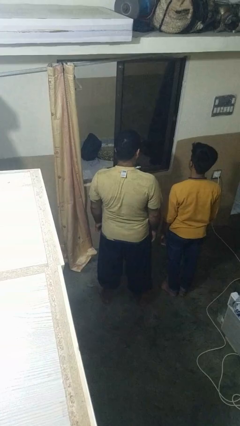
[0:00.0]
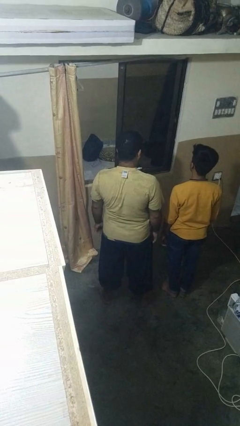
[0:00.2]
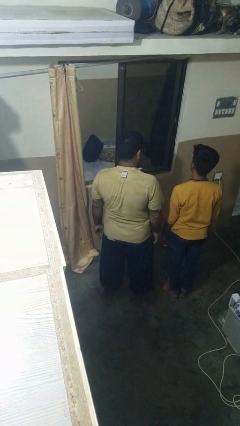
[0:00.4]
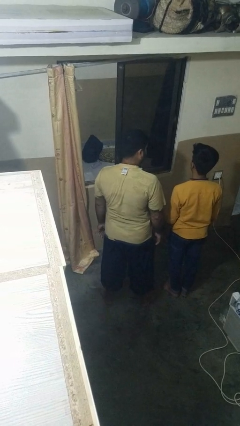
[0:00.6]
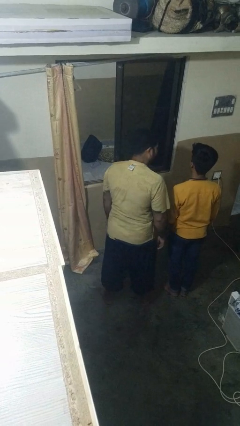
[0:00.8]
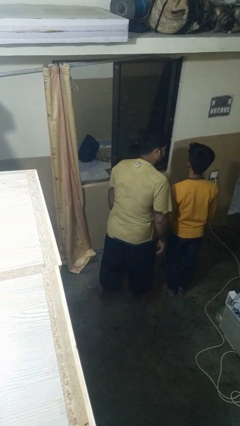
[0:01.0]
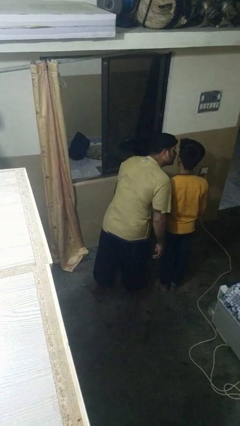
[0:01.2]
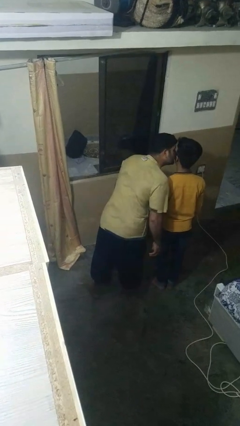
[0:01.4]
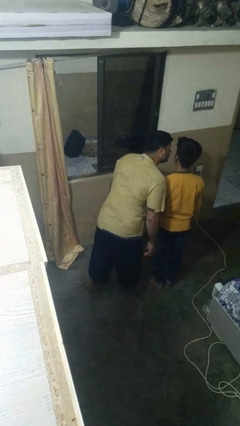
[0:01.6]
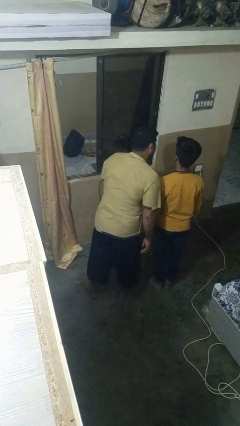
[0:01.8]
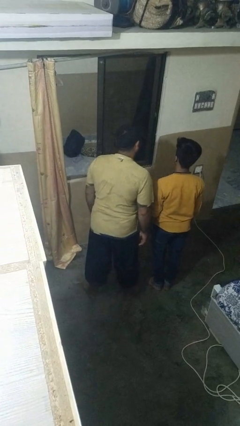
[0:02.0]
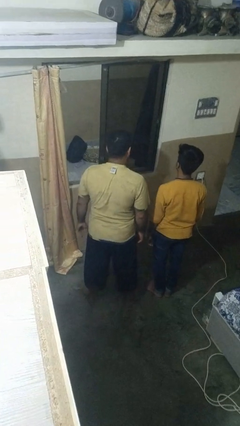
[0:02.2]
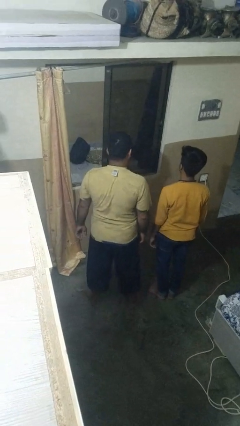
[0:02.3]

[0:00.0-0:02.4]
person kisses cheek of person

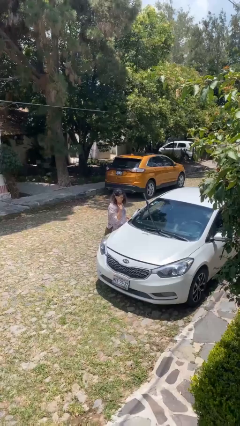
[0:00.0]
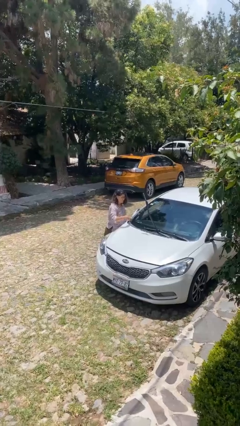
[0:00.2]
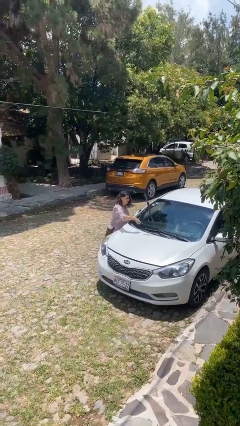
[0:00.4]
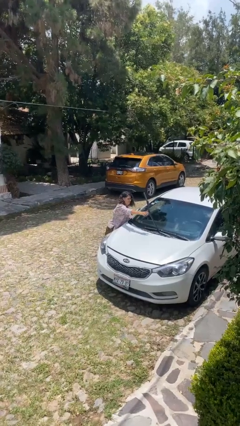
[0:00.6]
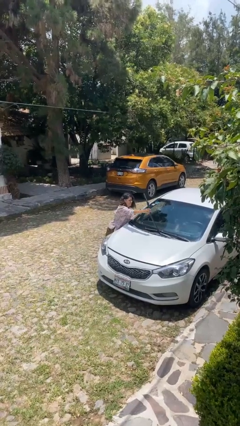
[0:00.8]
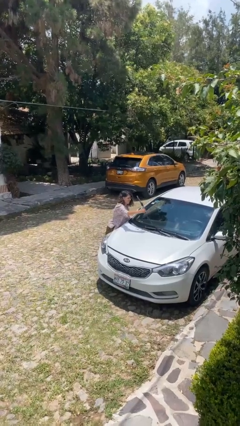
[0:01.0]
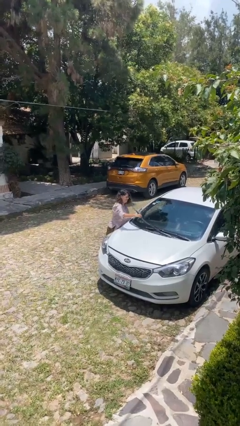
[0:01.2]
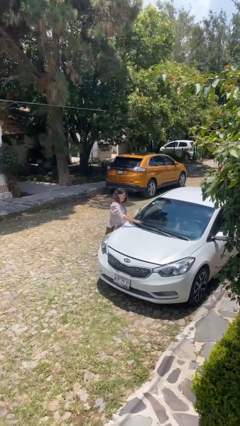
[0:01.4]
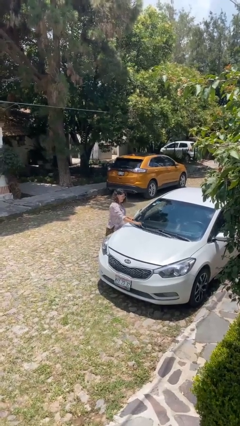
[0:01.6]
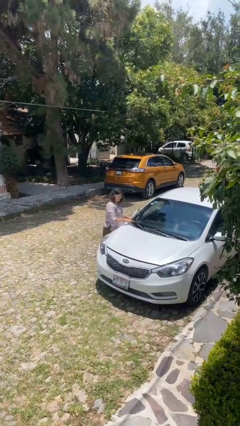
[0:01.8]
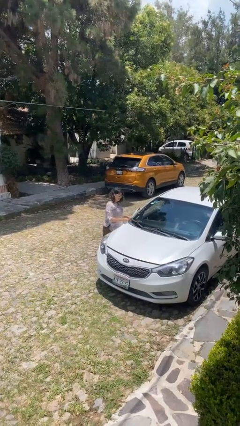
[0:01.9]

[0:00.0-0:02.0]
person flips down car wipers

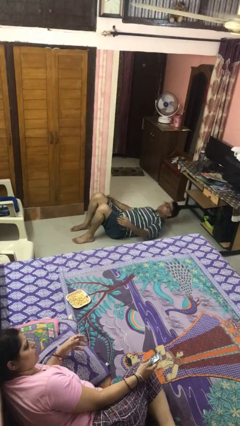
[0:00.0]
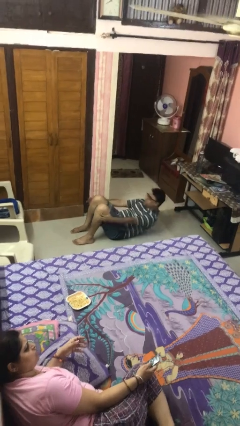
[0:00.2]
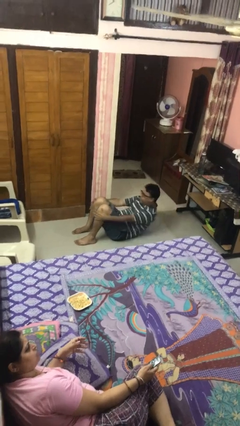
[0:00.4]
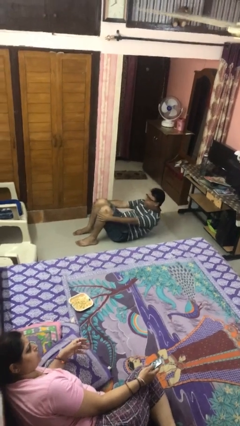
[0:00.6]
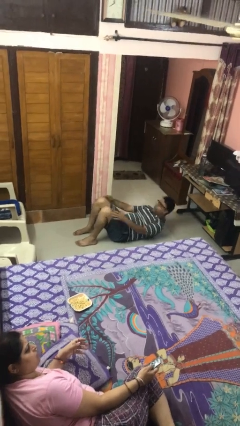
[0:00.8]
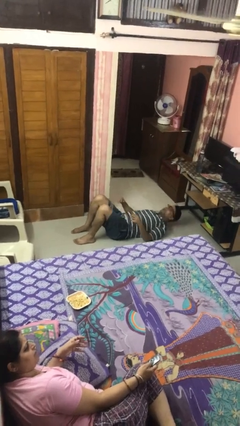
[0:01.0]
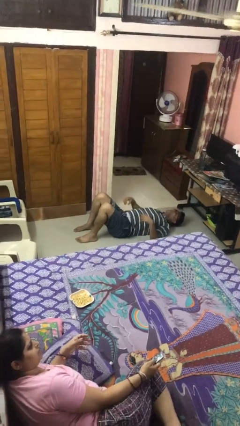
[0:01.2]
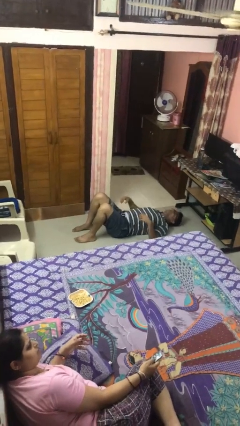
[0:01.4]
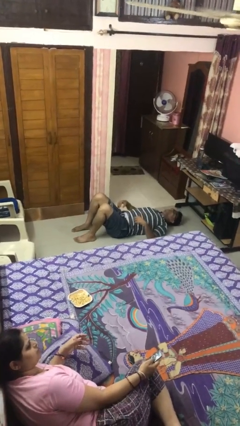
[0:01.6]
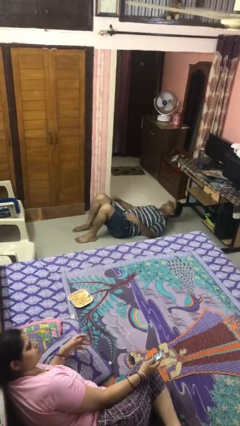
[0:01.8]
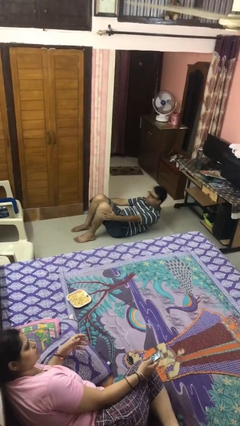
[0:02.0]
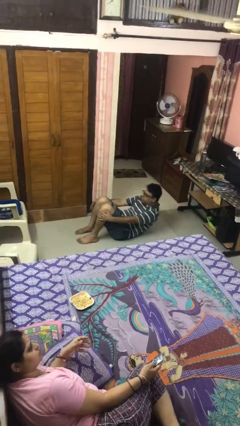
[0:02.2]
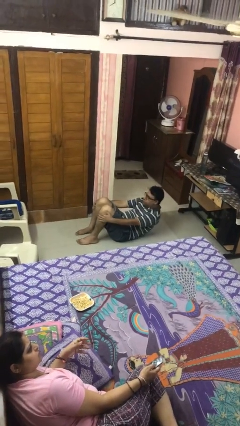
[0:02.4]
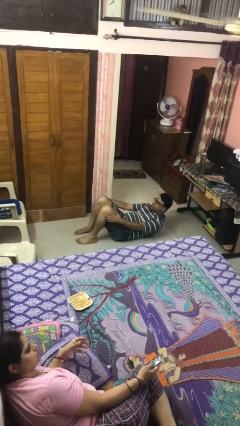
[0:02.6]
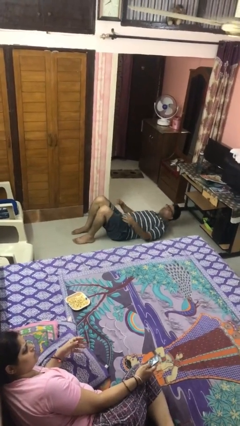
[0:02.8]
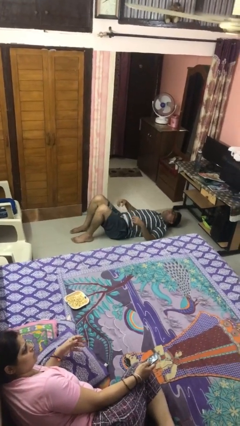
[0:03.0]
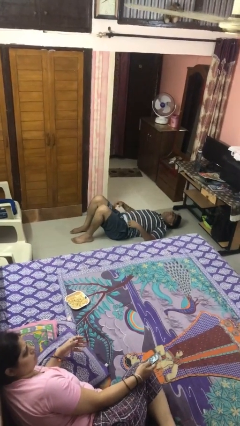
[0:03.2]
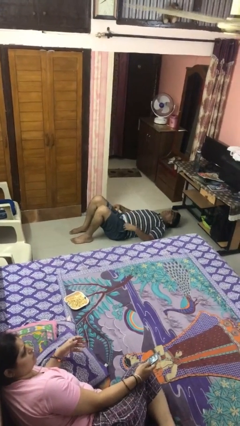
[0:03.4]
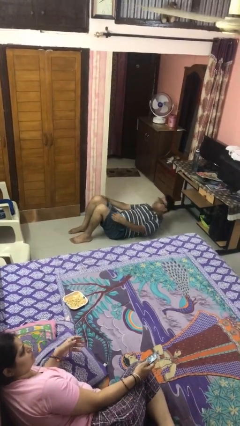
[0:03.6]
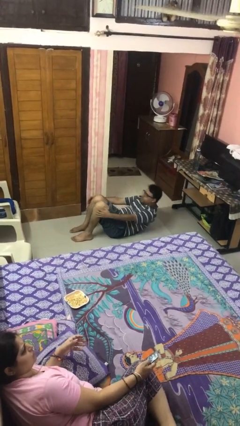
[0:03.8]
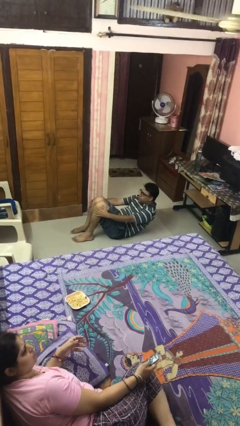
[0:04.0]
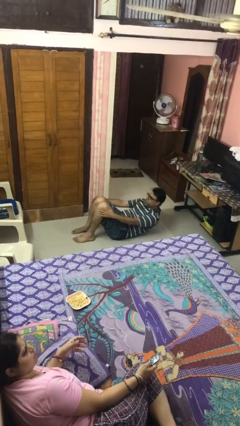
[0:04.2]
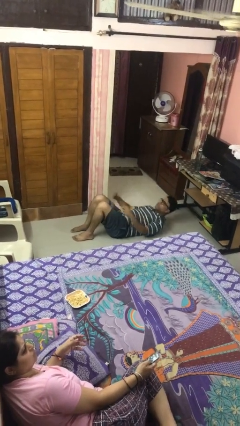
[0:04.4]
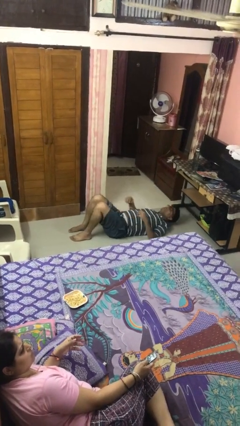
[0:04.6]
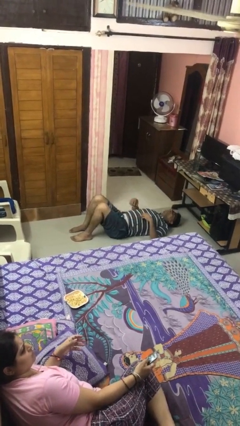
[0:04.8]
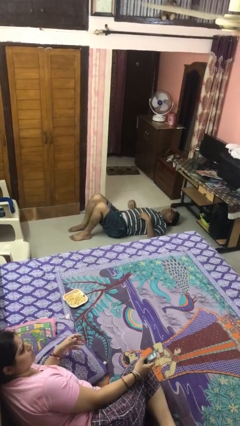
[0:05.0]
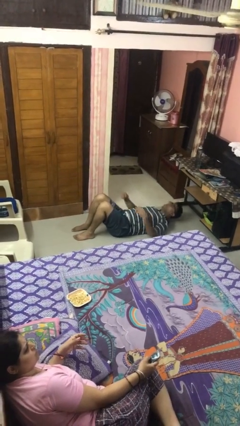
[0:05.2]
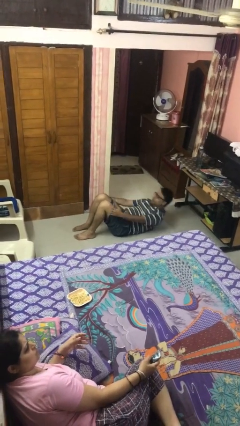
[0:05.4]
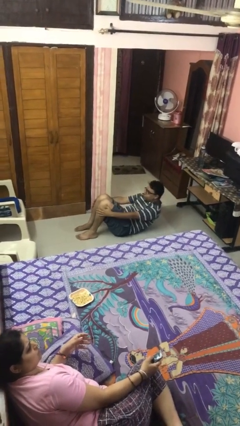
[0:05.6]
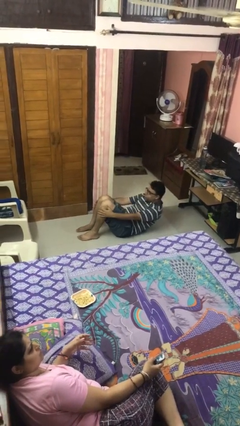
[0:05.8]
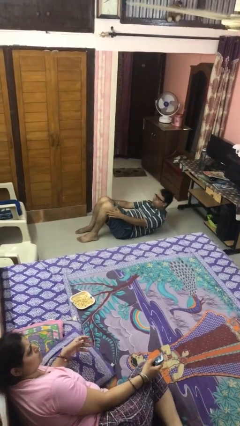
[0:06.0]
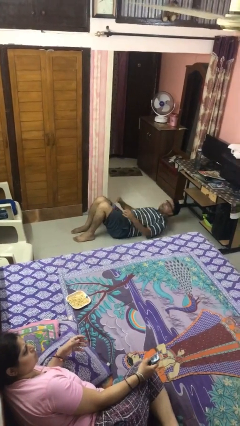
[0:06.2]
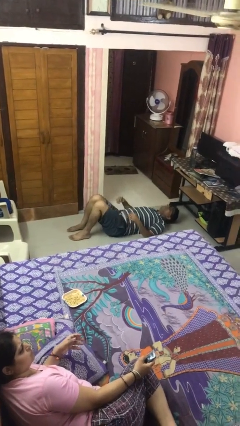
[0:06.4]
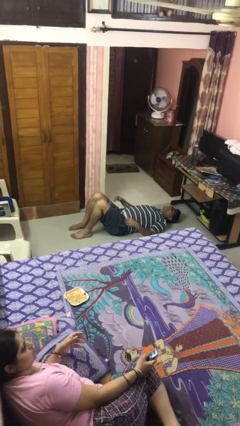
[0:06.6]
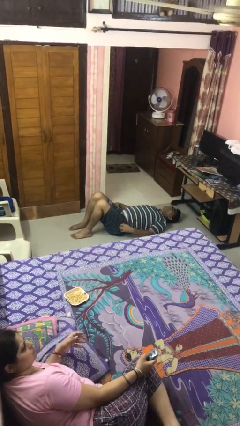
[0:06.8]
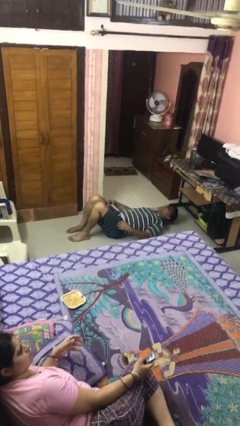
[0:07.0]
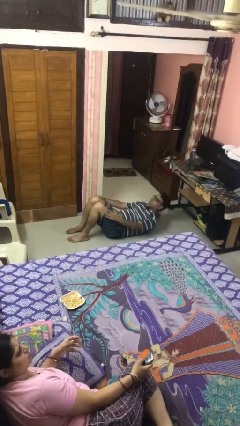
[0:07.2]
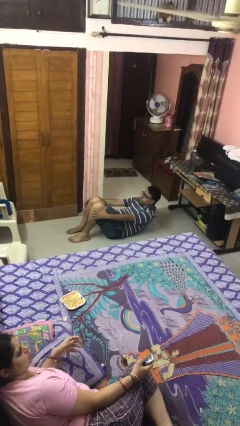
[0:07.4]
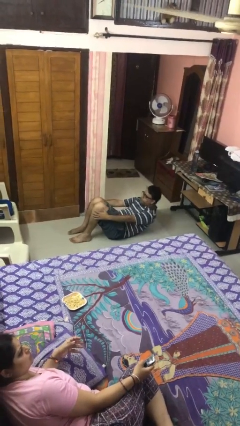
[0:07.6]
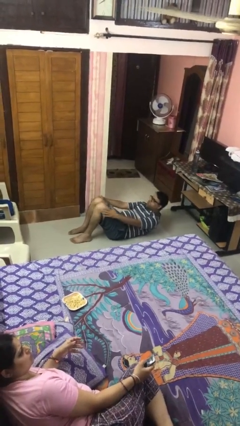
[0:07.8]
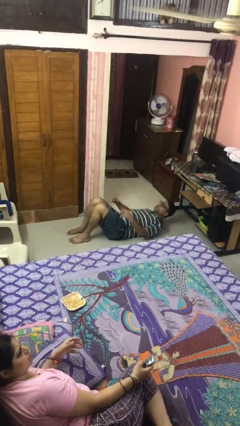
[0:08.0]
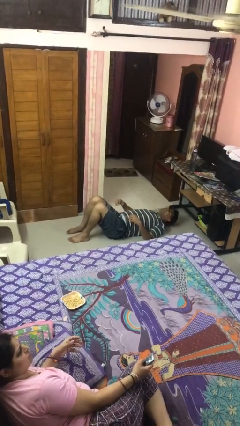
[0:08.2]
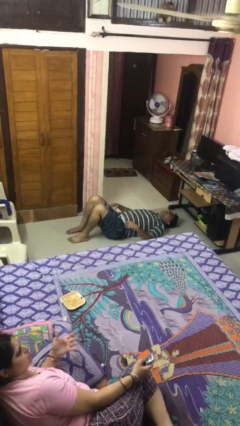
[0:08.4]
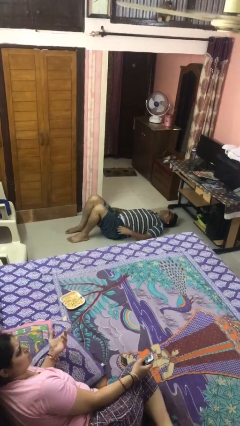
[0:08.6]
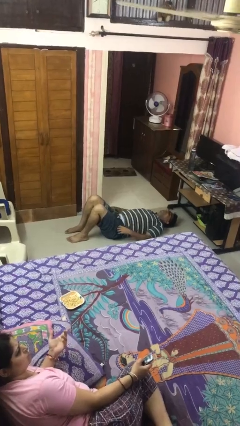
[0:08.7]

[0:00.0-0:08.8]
person exercises with situp

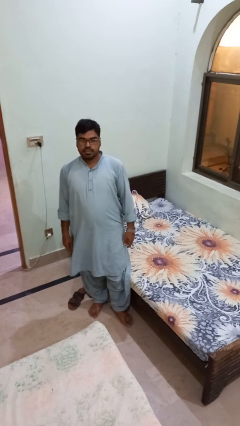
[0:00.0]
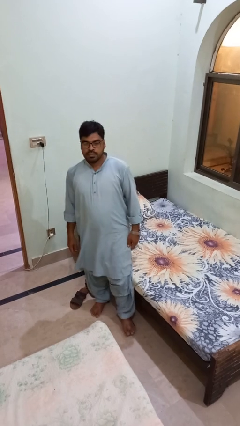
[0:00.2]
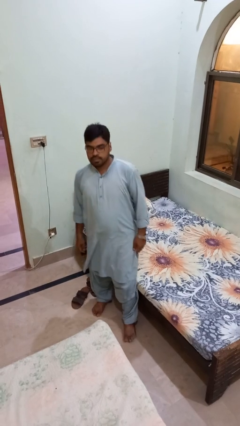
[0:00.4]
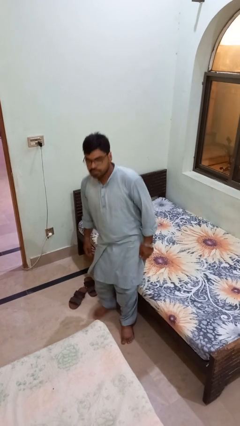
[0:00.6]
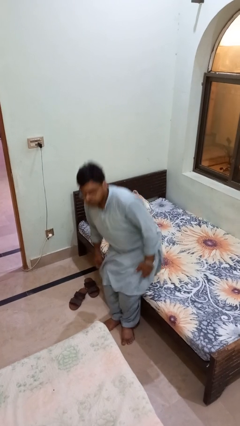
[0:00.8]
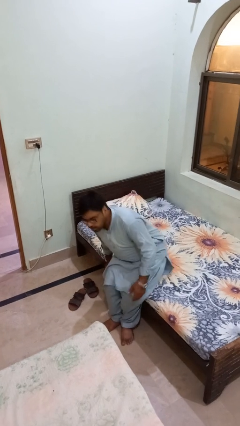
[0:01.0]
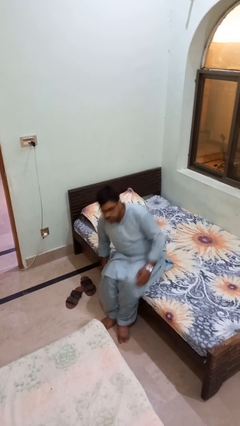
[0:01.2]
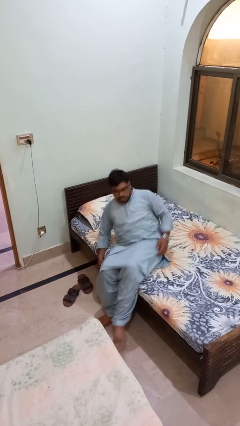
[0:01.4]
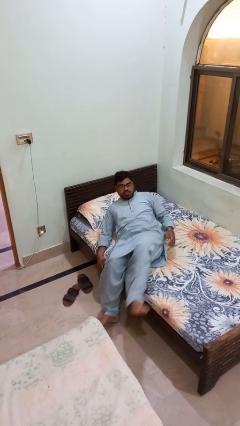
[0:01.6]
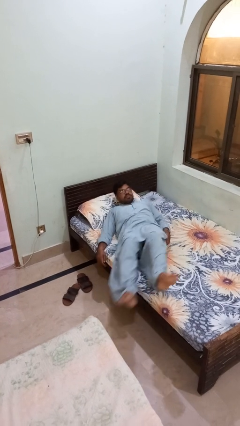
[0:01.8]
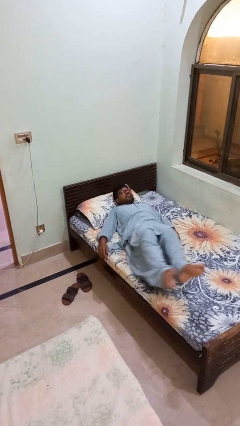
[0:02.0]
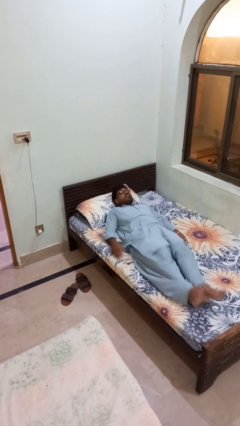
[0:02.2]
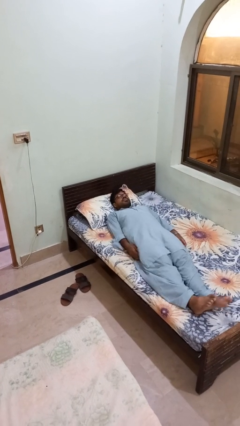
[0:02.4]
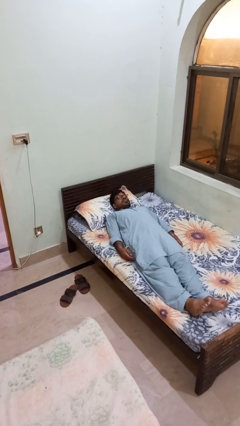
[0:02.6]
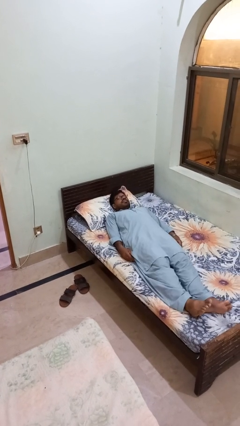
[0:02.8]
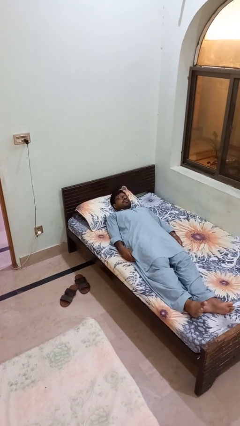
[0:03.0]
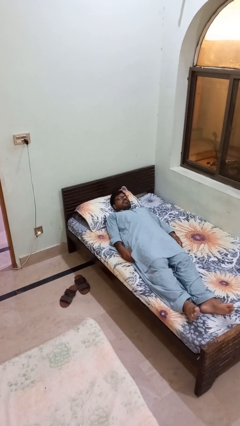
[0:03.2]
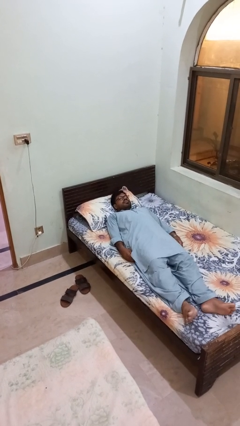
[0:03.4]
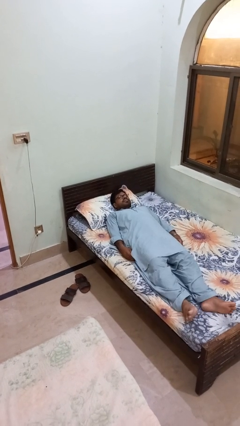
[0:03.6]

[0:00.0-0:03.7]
person lies down on bed

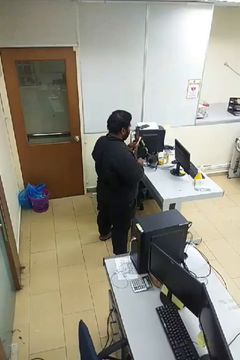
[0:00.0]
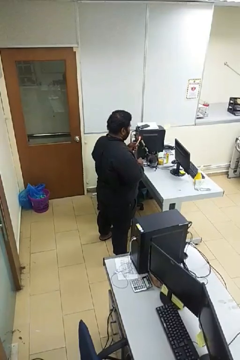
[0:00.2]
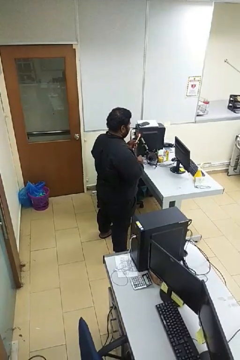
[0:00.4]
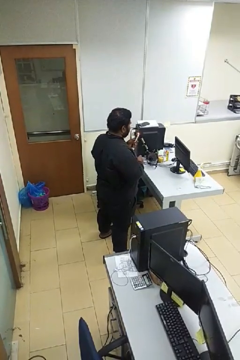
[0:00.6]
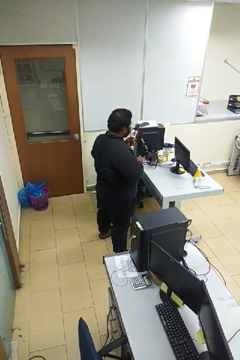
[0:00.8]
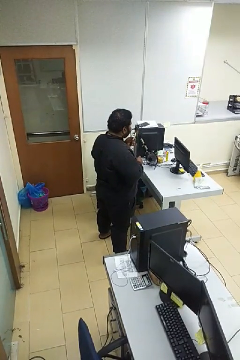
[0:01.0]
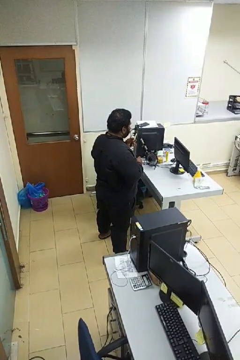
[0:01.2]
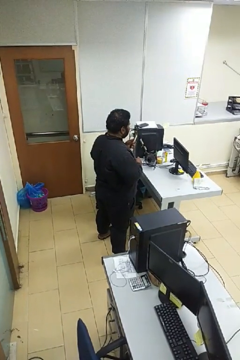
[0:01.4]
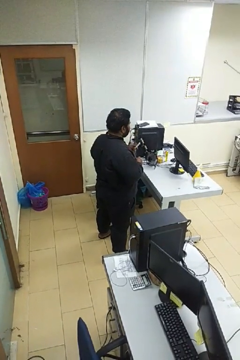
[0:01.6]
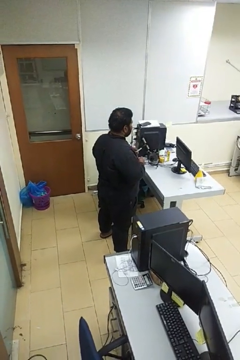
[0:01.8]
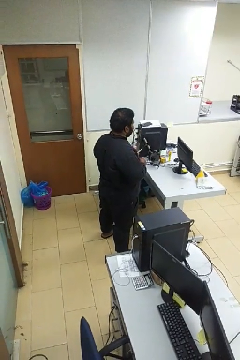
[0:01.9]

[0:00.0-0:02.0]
person extinguishes candle
